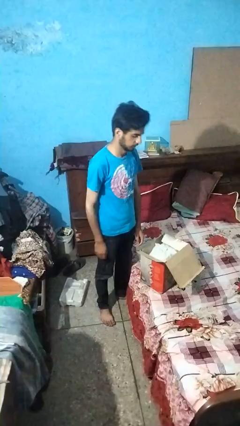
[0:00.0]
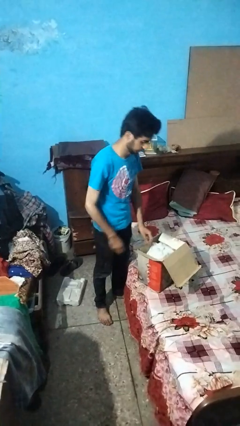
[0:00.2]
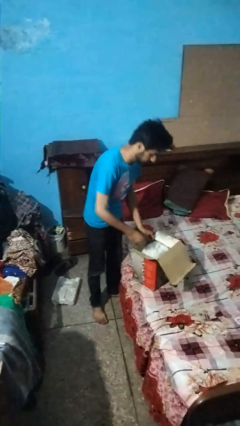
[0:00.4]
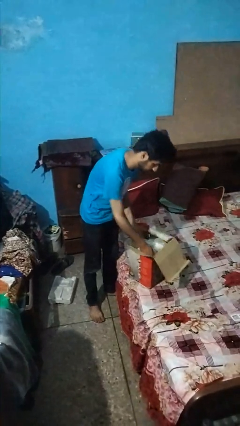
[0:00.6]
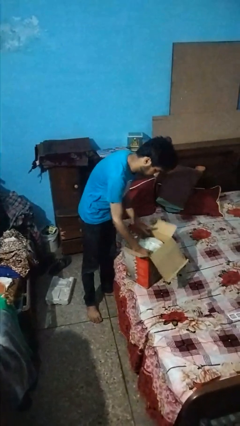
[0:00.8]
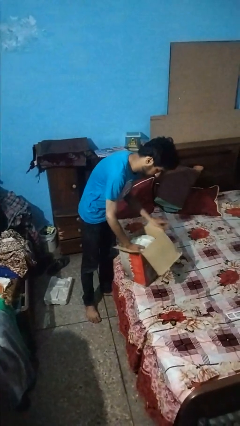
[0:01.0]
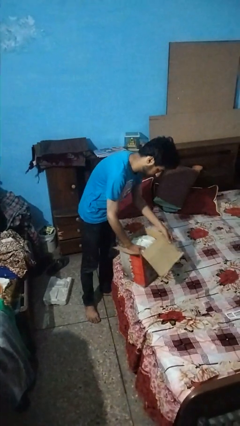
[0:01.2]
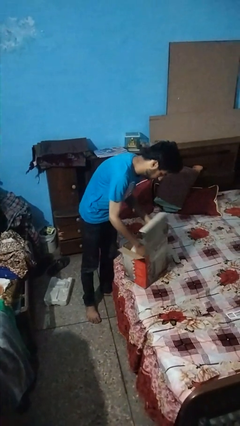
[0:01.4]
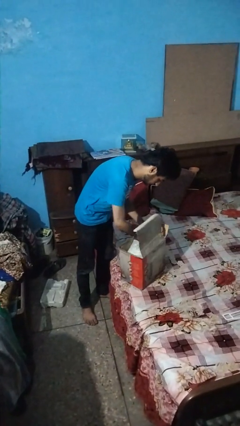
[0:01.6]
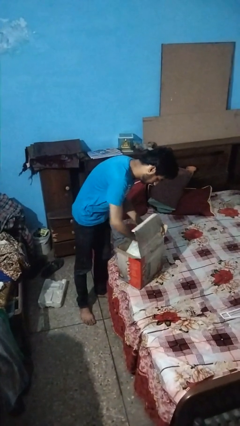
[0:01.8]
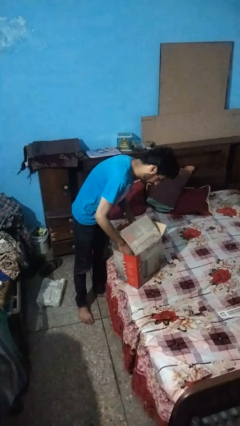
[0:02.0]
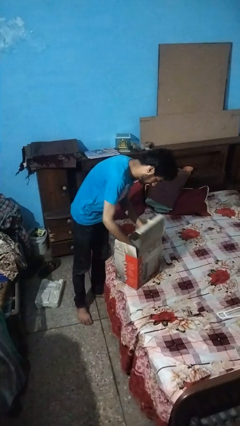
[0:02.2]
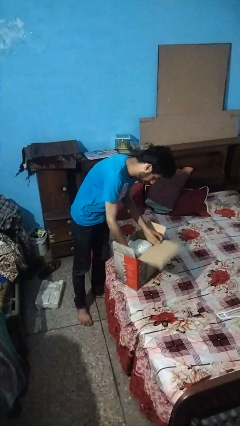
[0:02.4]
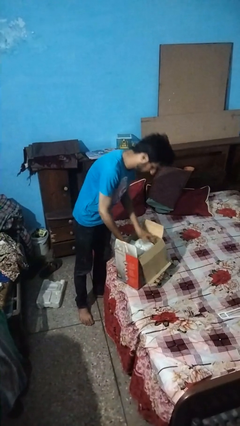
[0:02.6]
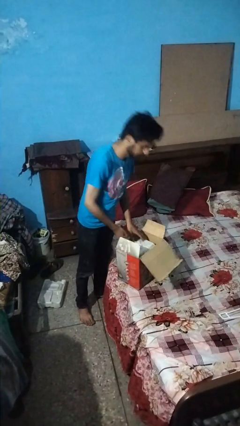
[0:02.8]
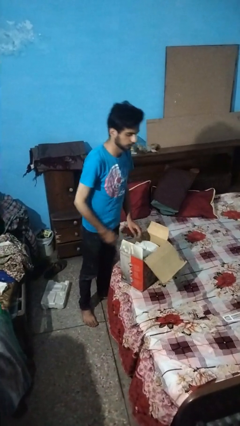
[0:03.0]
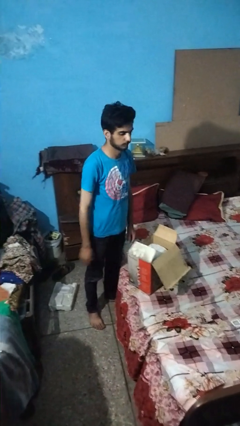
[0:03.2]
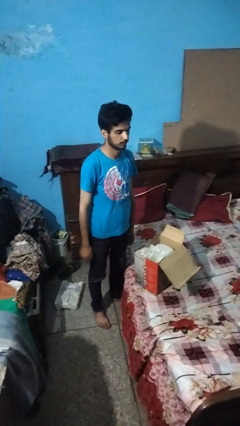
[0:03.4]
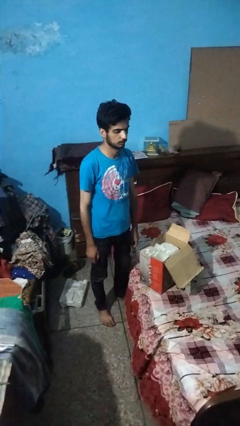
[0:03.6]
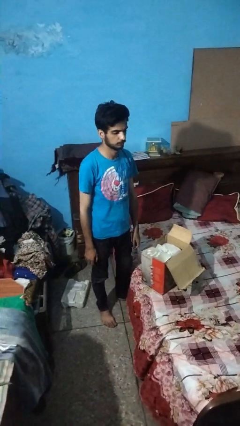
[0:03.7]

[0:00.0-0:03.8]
person searches in box

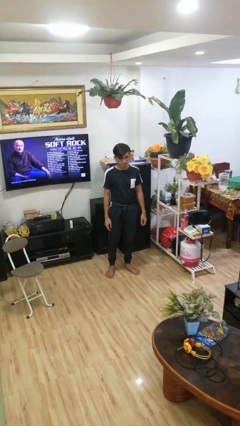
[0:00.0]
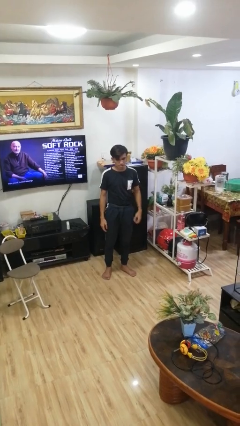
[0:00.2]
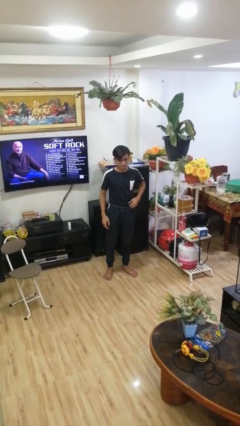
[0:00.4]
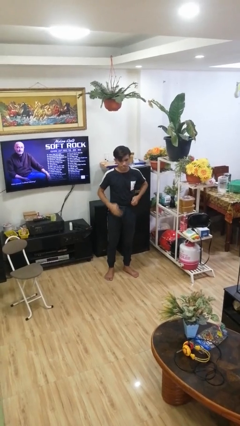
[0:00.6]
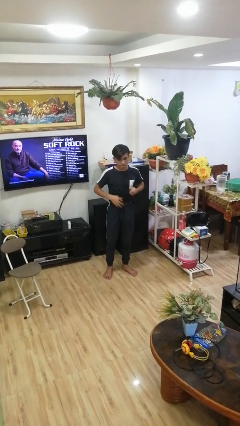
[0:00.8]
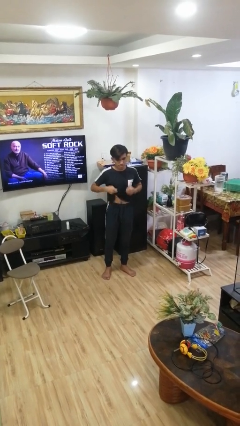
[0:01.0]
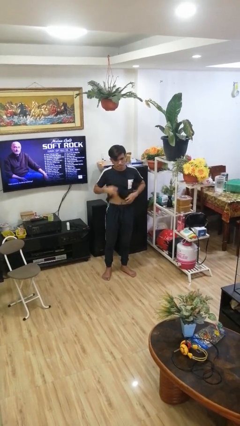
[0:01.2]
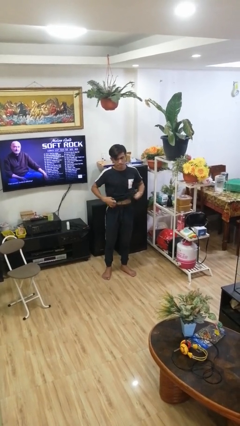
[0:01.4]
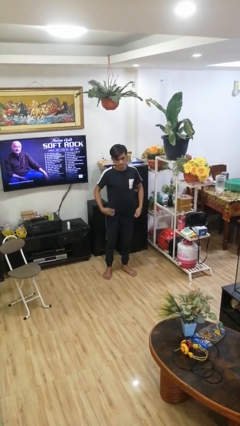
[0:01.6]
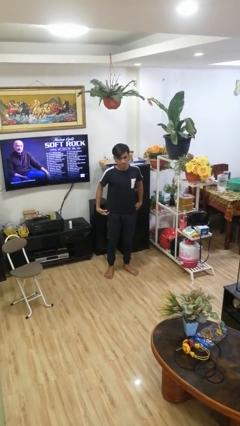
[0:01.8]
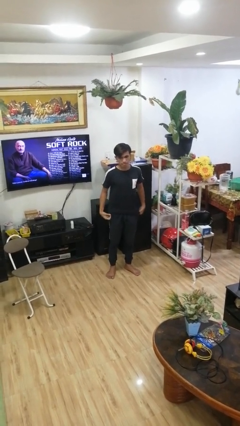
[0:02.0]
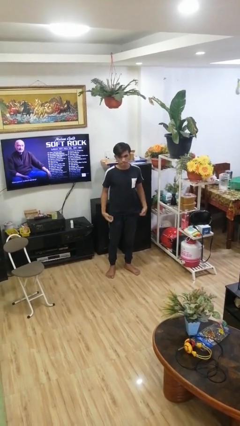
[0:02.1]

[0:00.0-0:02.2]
person untucks shirt

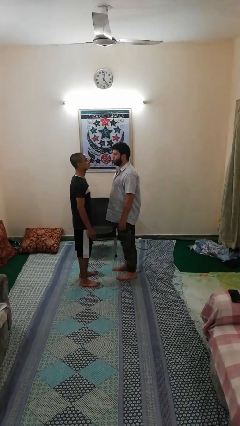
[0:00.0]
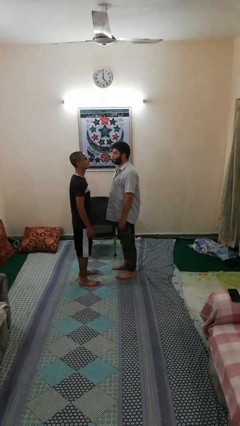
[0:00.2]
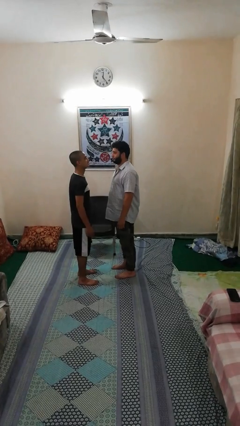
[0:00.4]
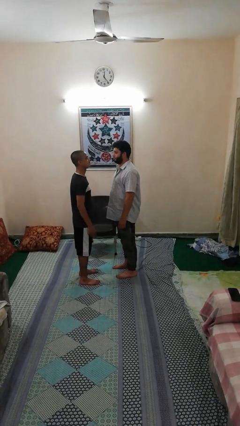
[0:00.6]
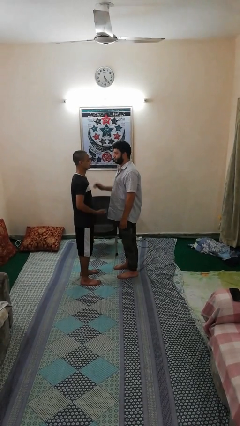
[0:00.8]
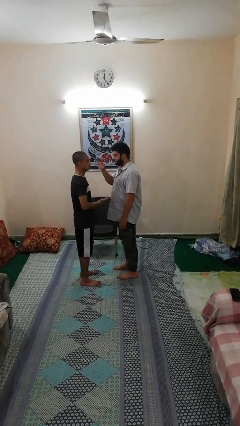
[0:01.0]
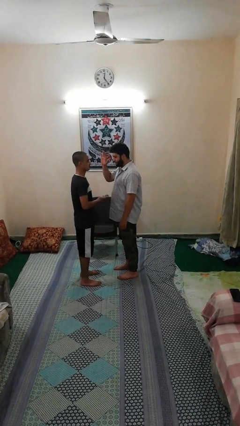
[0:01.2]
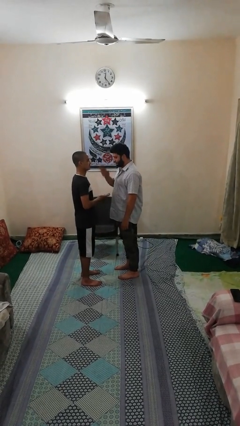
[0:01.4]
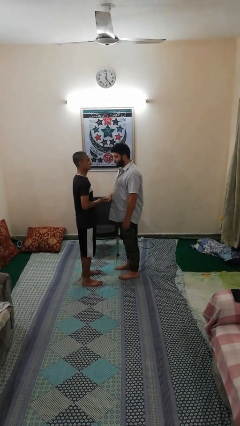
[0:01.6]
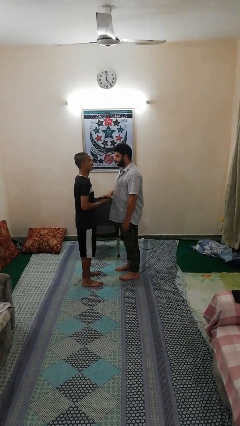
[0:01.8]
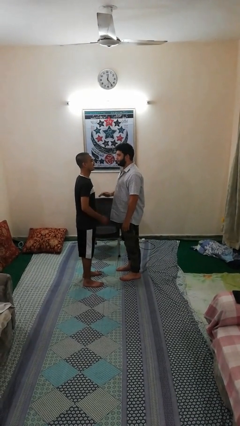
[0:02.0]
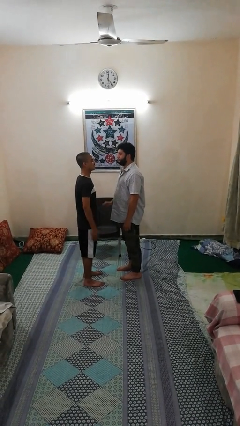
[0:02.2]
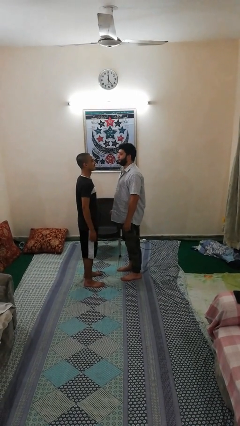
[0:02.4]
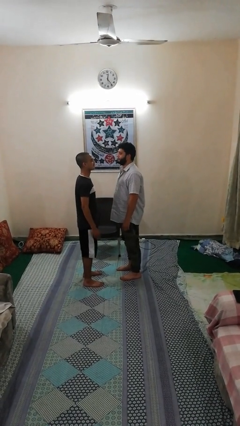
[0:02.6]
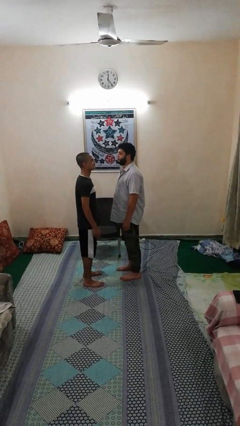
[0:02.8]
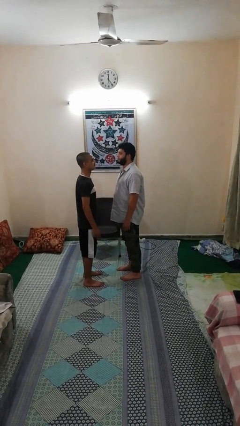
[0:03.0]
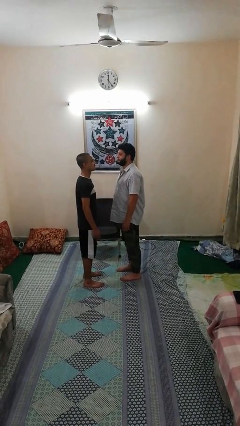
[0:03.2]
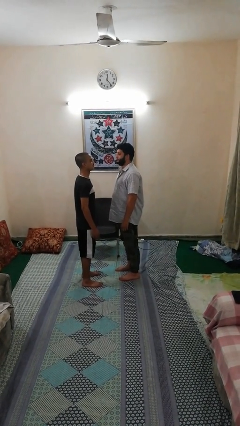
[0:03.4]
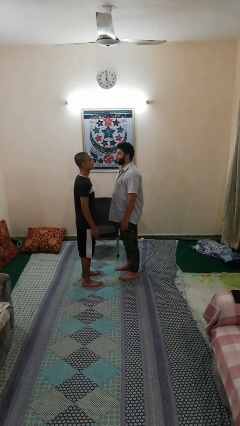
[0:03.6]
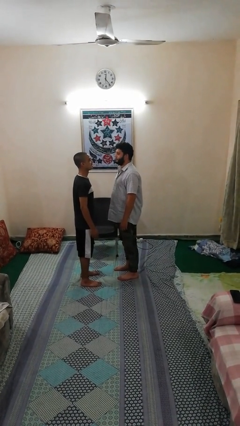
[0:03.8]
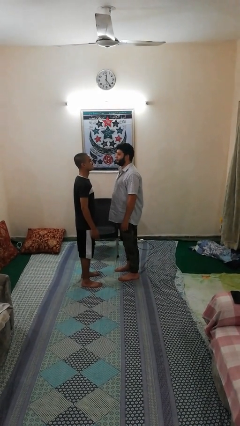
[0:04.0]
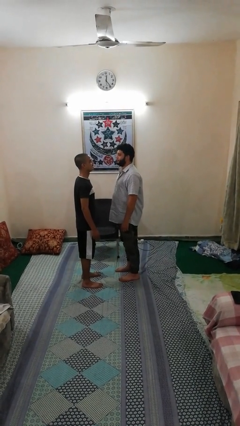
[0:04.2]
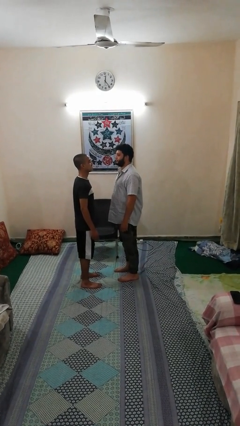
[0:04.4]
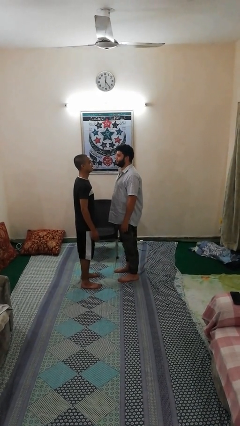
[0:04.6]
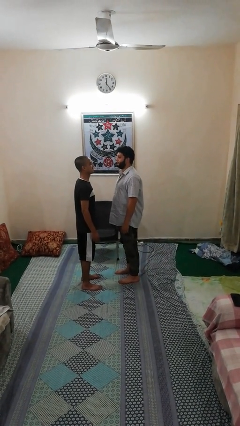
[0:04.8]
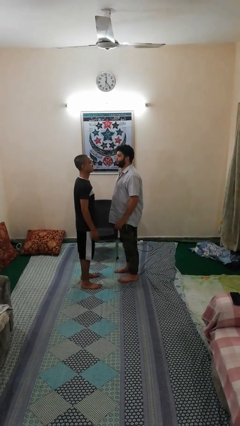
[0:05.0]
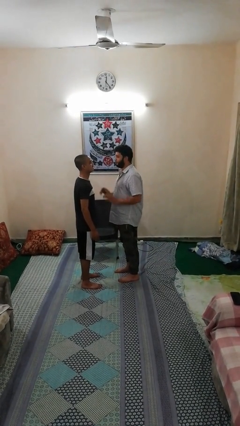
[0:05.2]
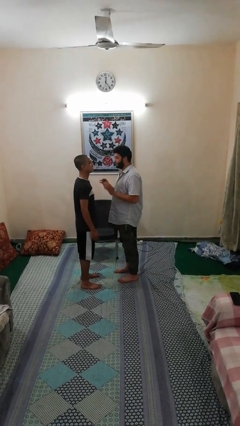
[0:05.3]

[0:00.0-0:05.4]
person highfives hand

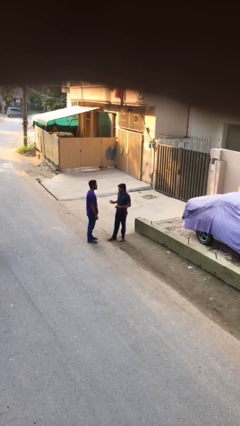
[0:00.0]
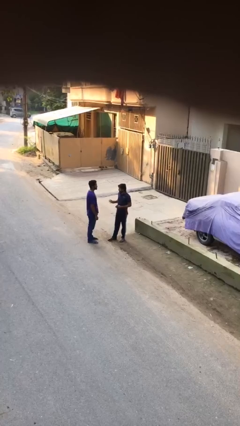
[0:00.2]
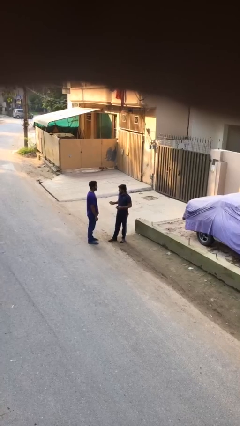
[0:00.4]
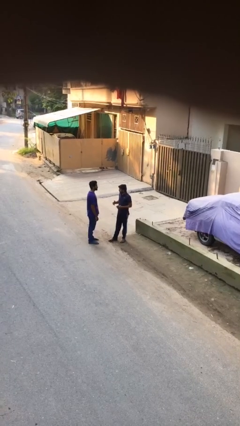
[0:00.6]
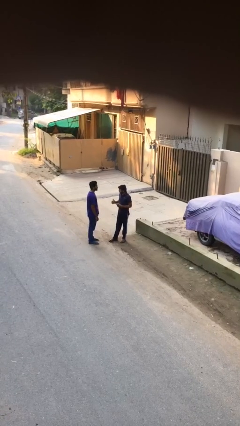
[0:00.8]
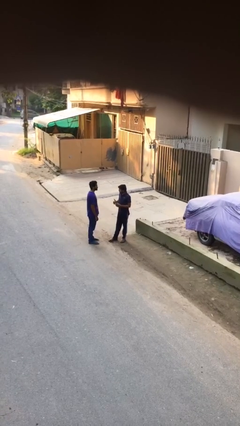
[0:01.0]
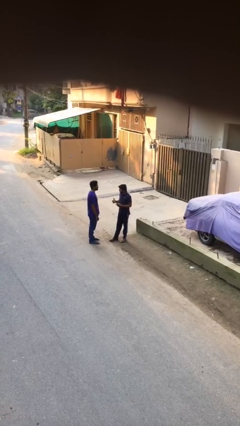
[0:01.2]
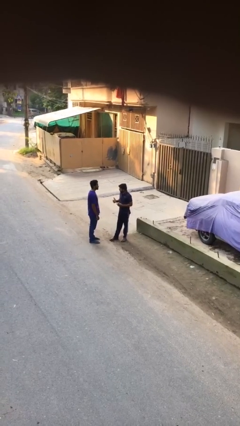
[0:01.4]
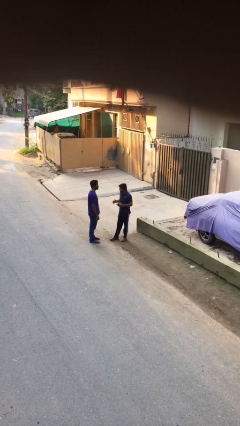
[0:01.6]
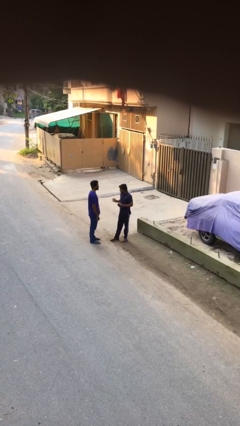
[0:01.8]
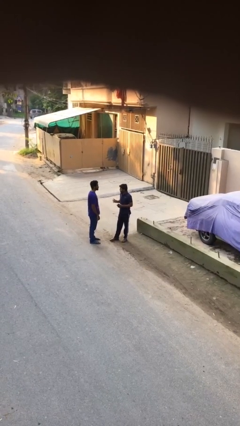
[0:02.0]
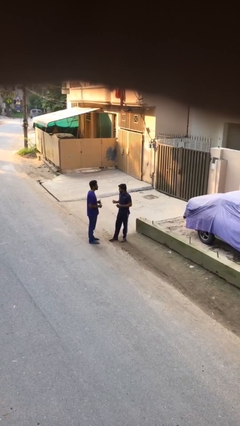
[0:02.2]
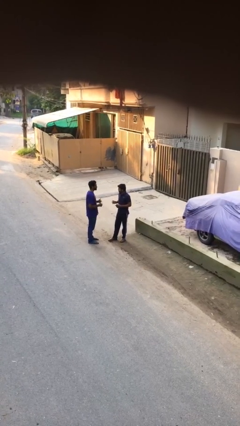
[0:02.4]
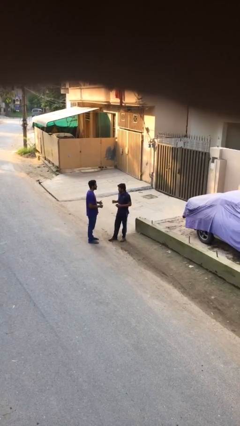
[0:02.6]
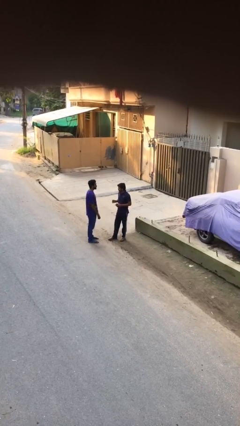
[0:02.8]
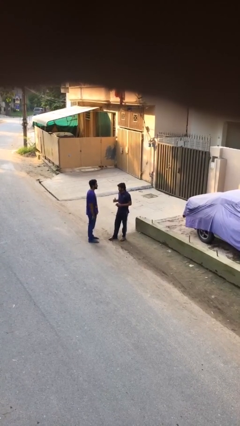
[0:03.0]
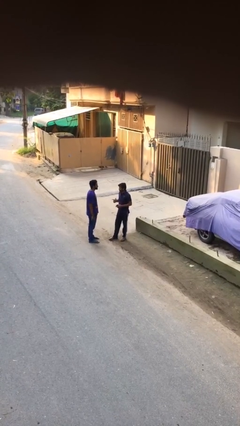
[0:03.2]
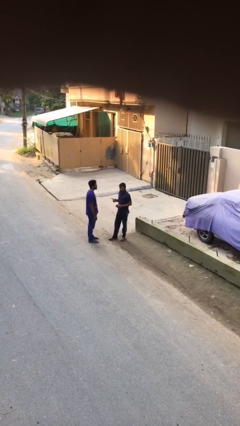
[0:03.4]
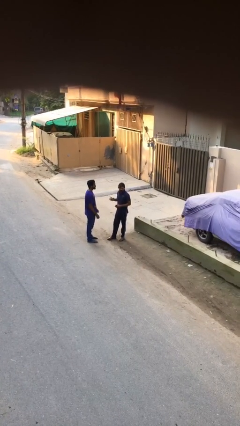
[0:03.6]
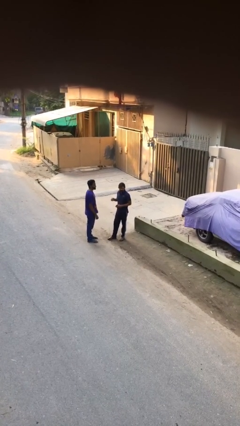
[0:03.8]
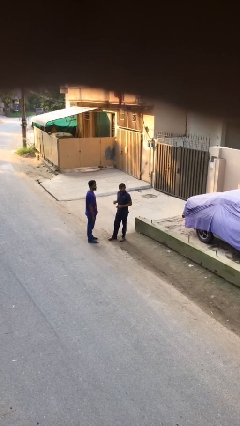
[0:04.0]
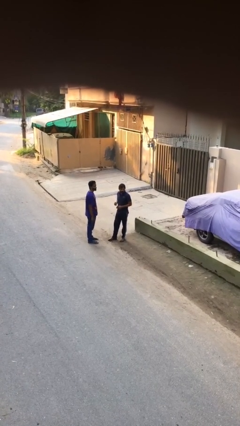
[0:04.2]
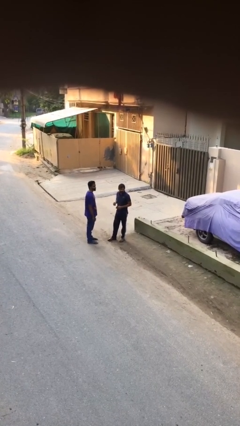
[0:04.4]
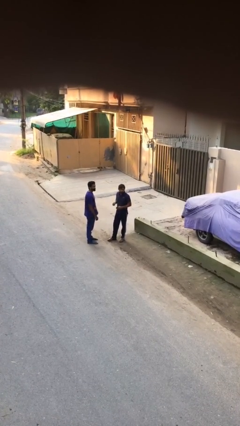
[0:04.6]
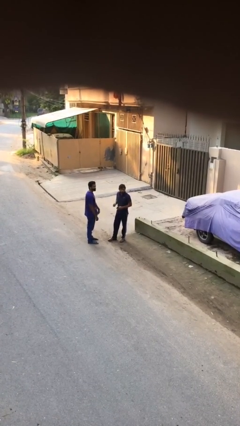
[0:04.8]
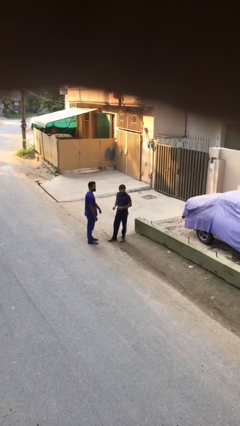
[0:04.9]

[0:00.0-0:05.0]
person talks to person

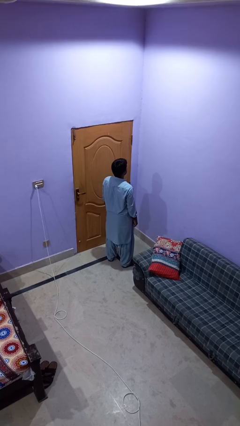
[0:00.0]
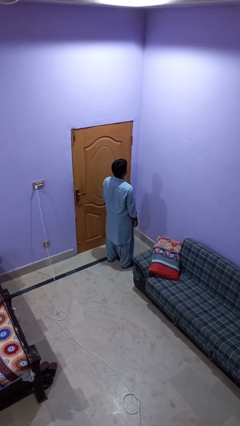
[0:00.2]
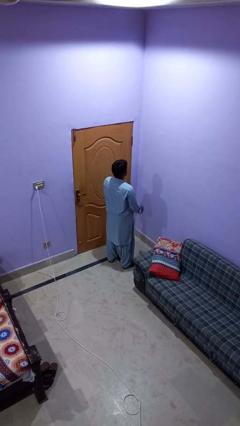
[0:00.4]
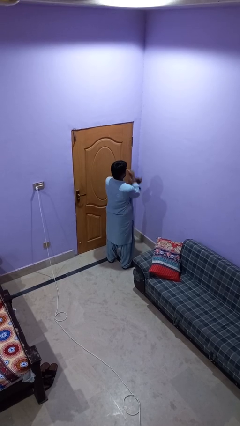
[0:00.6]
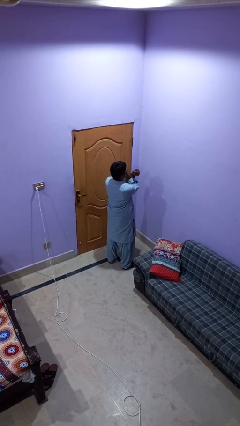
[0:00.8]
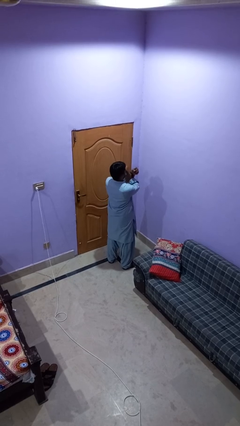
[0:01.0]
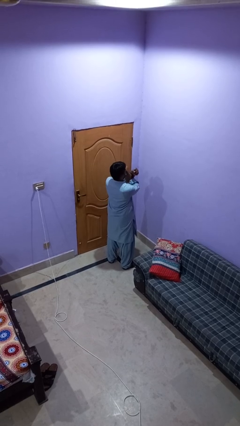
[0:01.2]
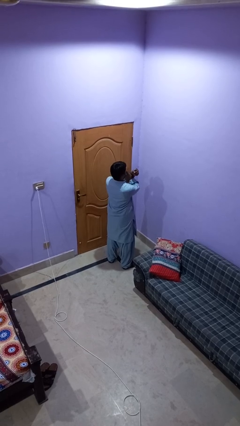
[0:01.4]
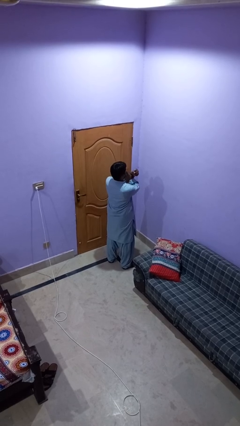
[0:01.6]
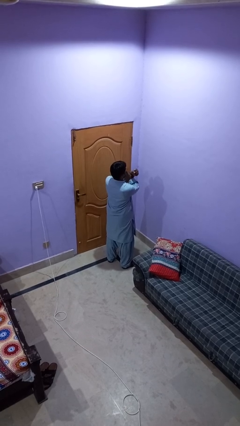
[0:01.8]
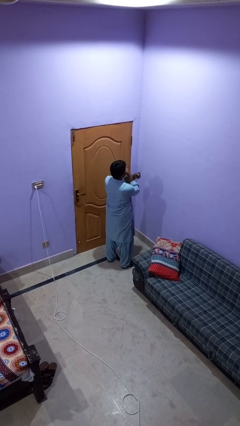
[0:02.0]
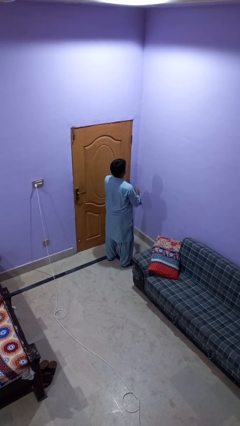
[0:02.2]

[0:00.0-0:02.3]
person gestures arms x
